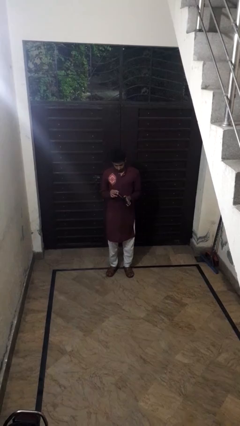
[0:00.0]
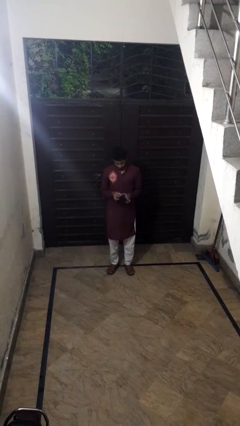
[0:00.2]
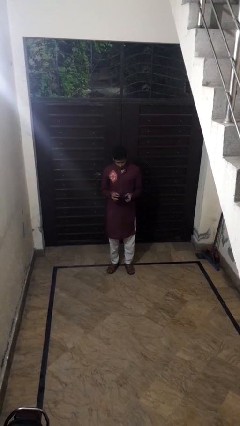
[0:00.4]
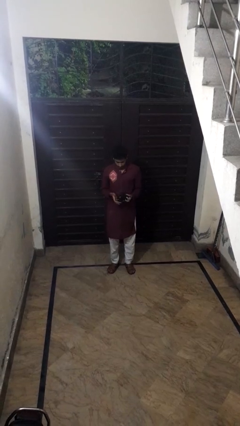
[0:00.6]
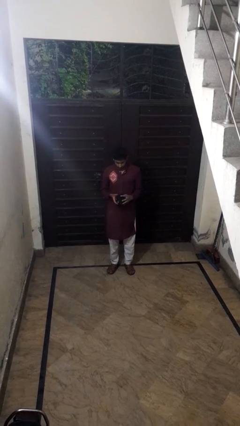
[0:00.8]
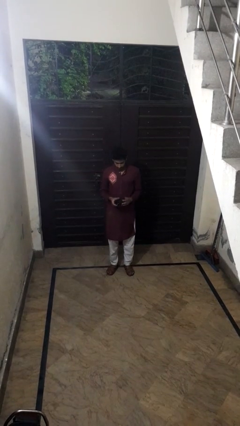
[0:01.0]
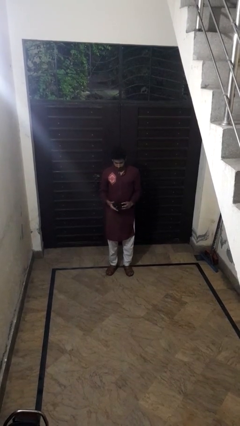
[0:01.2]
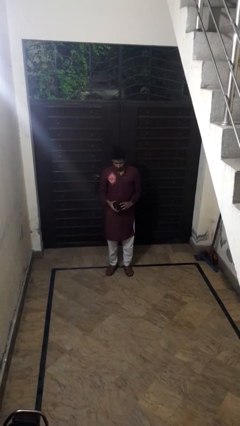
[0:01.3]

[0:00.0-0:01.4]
person puts object into purse

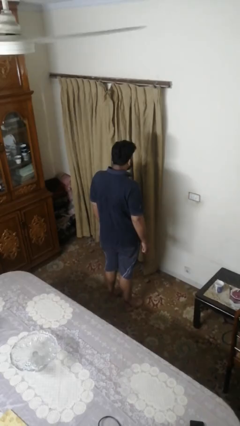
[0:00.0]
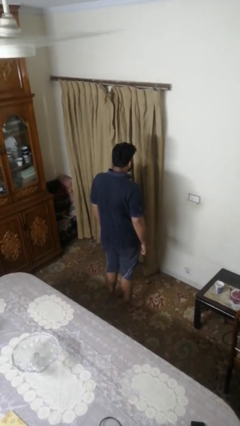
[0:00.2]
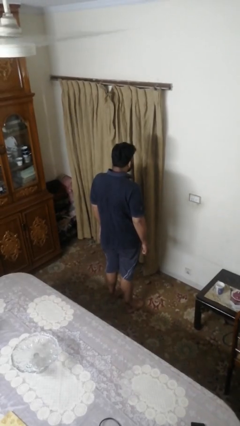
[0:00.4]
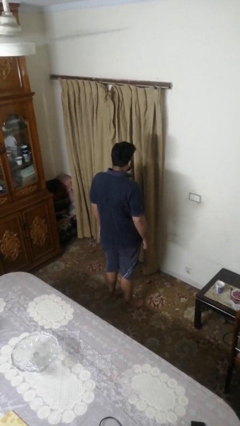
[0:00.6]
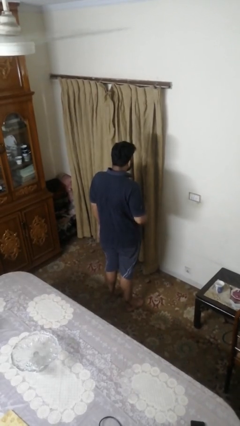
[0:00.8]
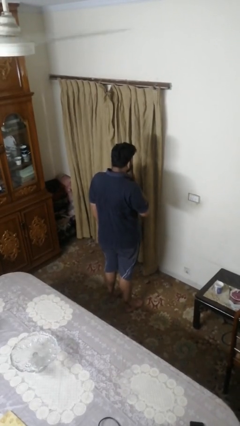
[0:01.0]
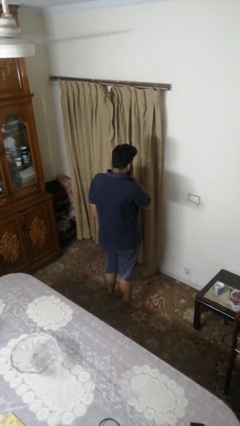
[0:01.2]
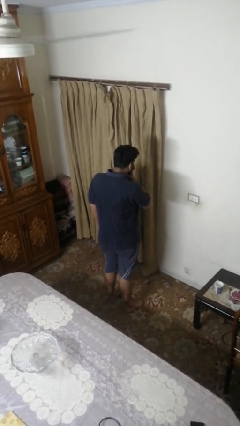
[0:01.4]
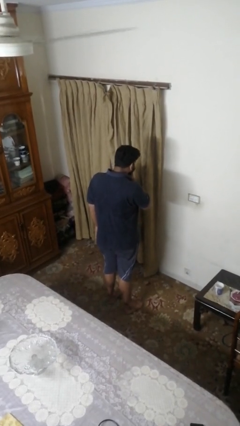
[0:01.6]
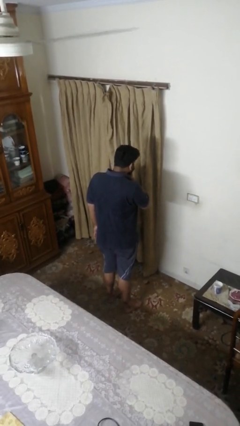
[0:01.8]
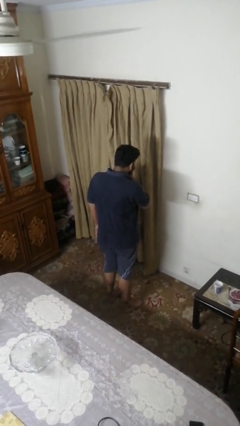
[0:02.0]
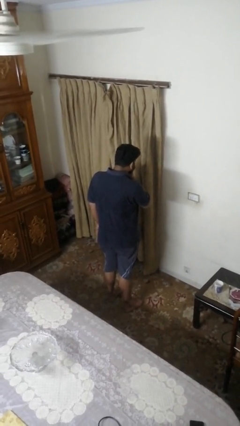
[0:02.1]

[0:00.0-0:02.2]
person strokes chin

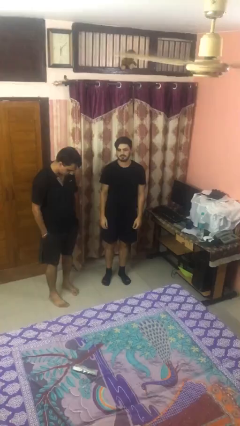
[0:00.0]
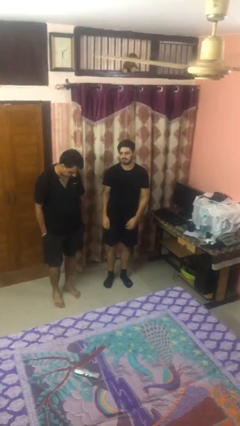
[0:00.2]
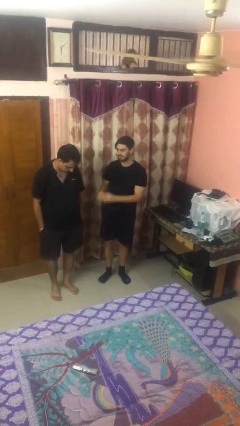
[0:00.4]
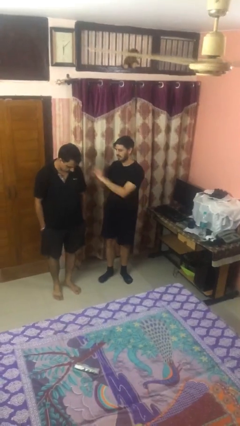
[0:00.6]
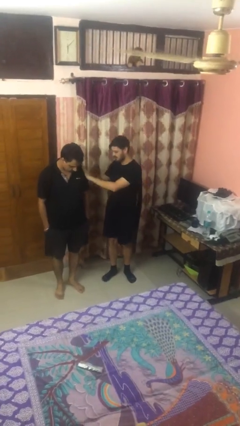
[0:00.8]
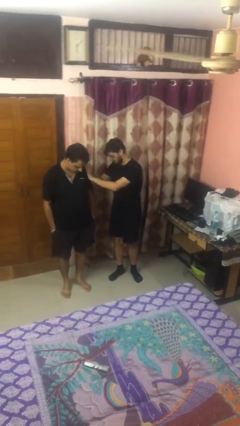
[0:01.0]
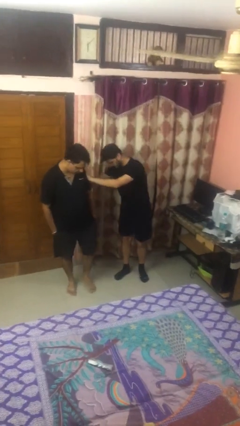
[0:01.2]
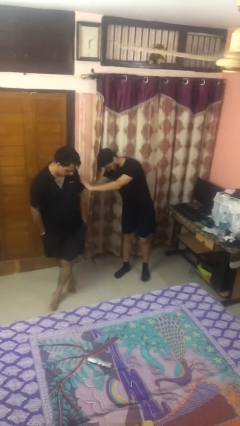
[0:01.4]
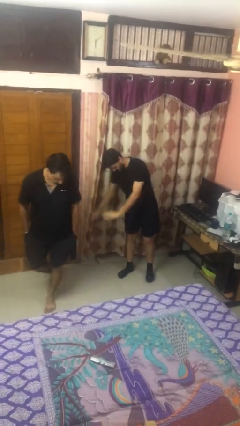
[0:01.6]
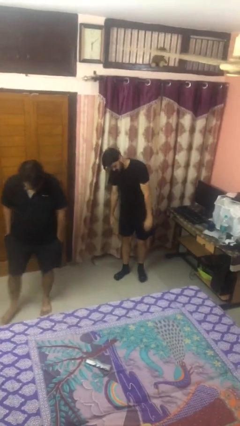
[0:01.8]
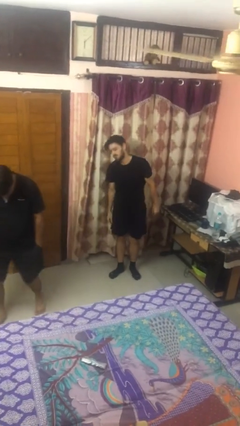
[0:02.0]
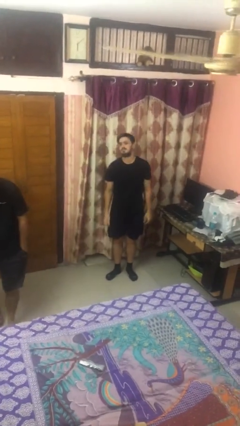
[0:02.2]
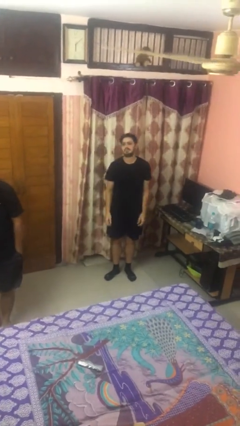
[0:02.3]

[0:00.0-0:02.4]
person shoves person

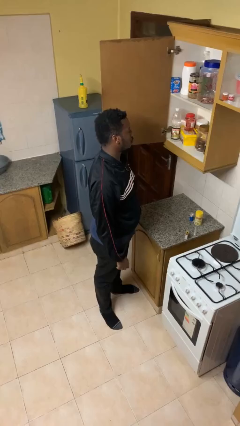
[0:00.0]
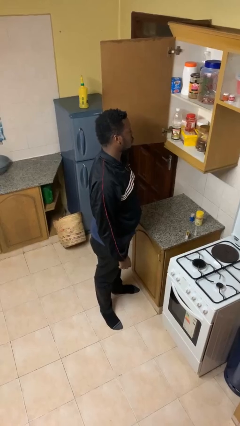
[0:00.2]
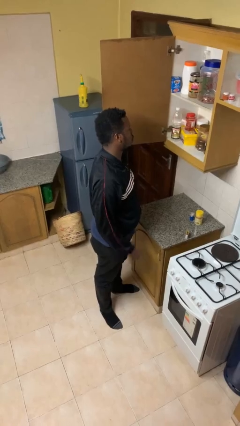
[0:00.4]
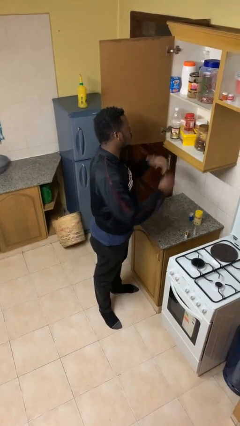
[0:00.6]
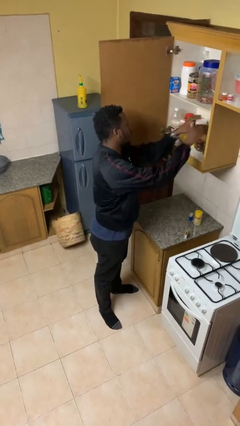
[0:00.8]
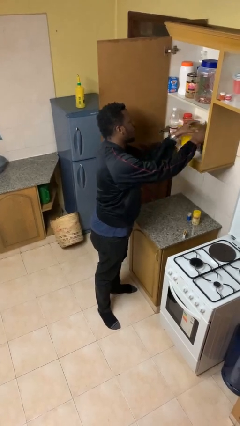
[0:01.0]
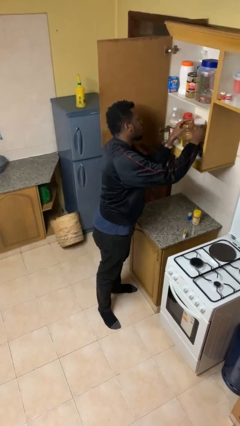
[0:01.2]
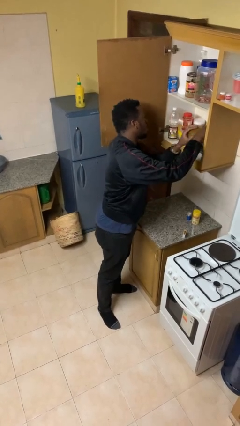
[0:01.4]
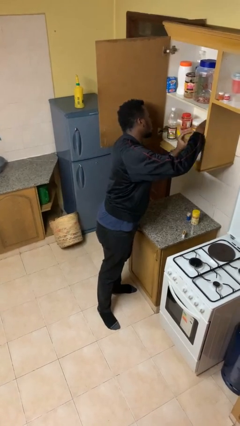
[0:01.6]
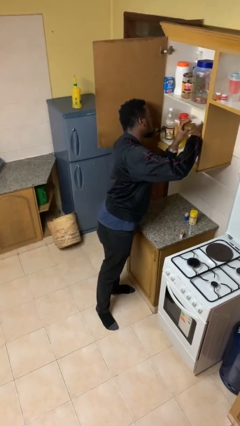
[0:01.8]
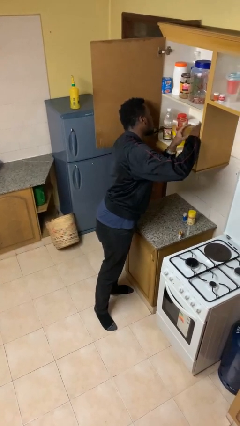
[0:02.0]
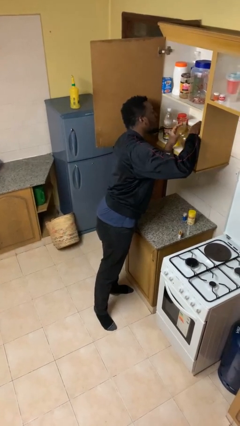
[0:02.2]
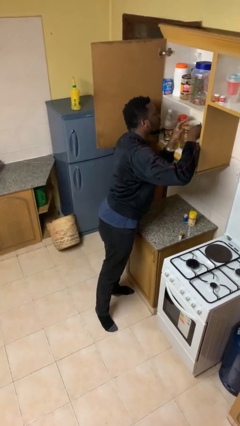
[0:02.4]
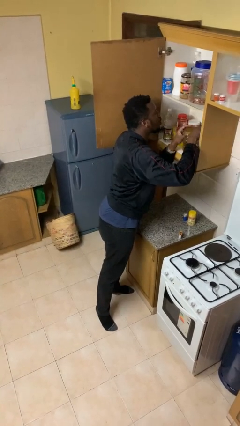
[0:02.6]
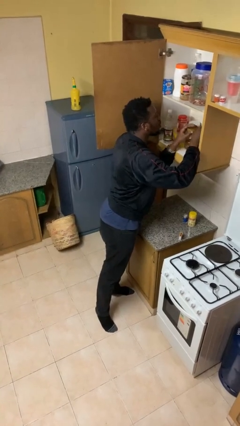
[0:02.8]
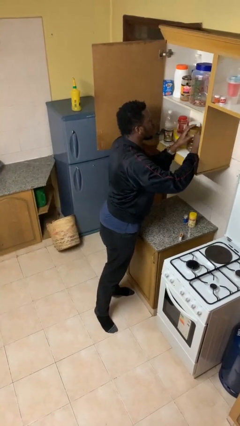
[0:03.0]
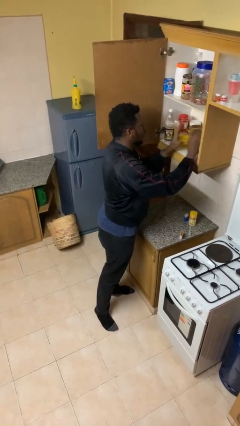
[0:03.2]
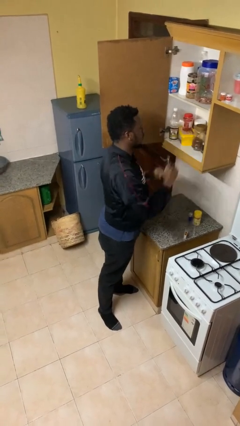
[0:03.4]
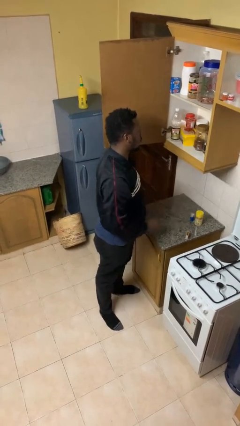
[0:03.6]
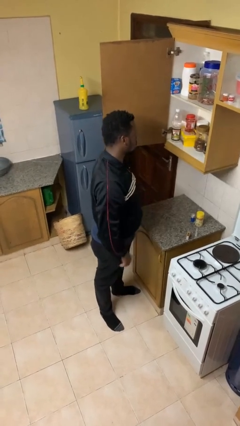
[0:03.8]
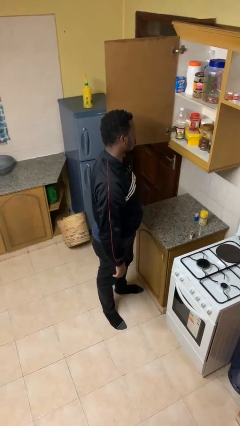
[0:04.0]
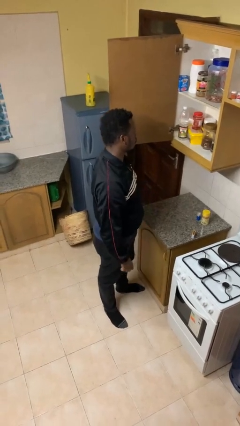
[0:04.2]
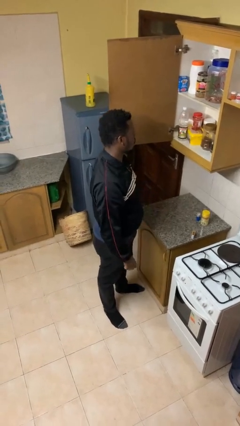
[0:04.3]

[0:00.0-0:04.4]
person searches in cabinet

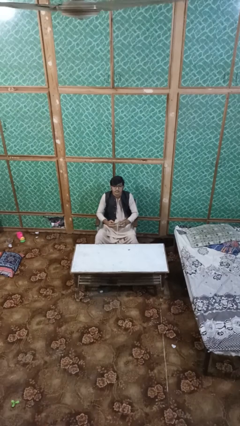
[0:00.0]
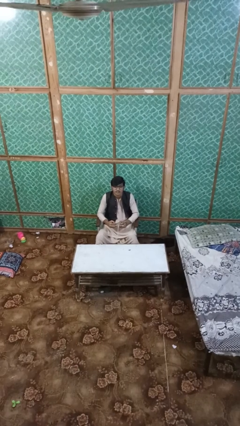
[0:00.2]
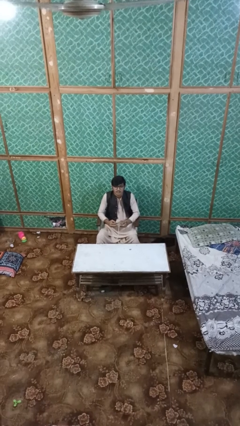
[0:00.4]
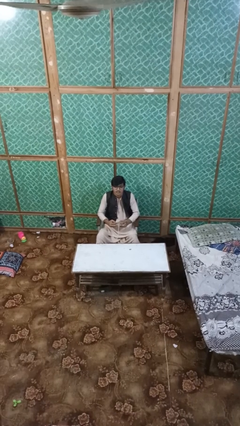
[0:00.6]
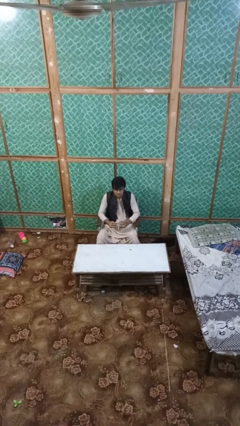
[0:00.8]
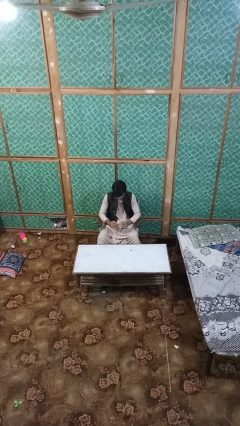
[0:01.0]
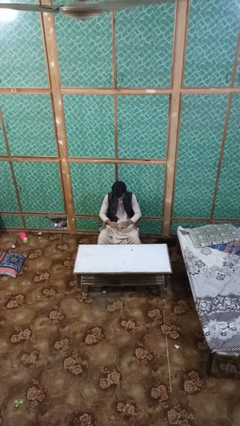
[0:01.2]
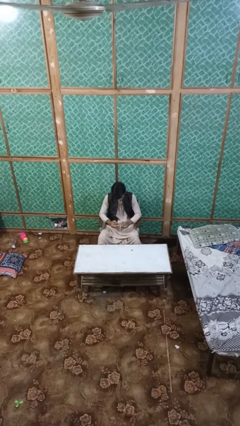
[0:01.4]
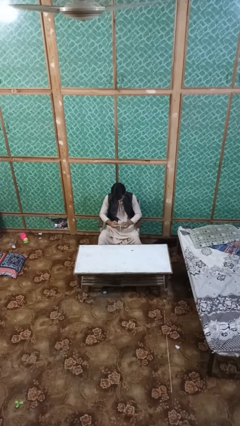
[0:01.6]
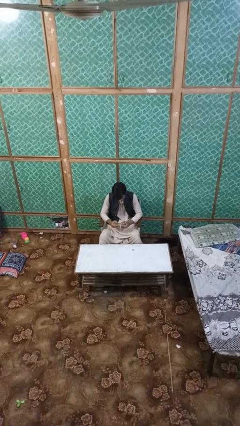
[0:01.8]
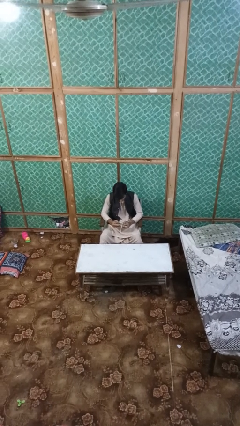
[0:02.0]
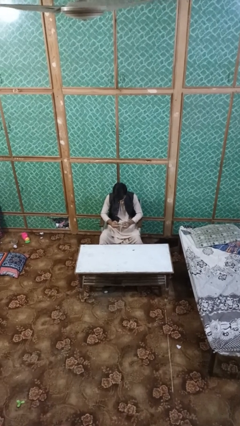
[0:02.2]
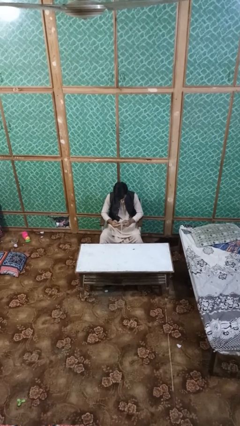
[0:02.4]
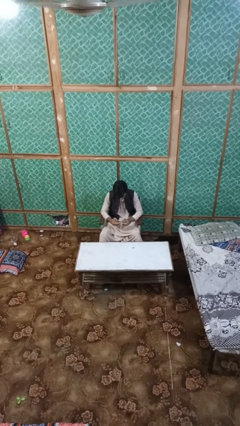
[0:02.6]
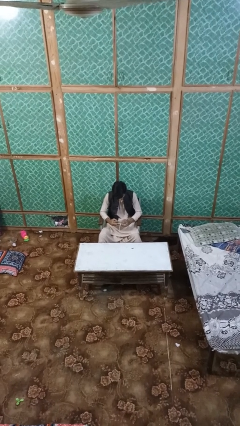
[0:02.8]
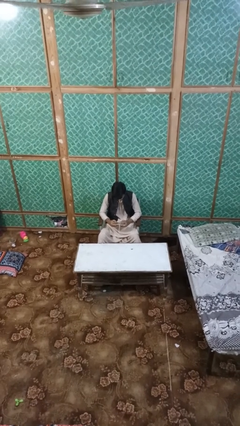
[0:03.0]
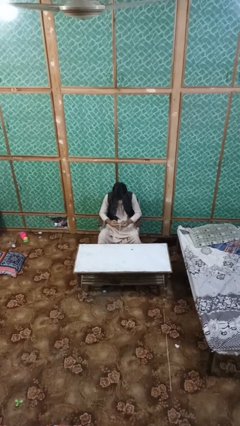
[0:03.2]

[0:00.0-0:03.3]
person interacts with handheld game

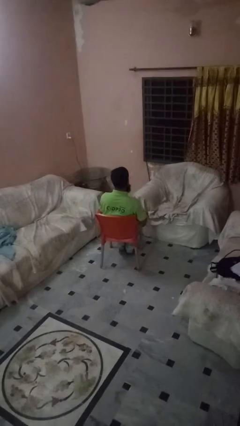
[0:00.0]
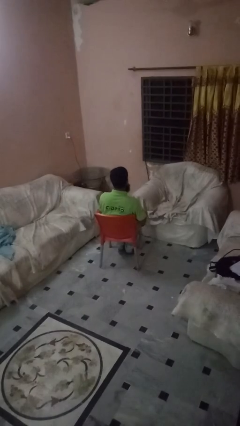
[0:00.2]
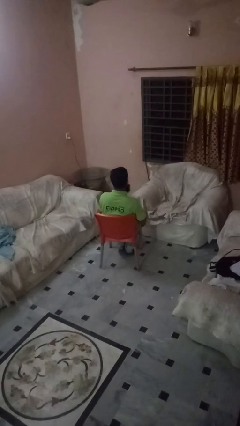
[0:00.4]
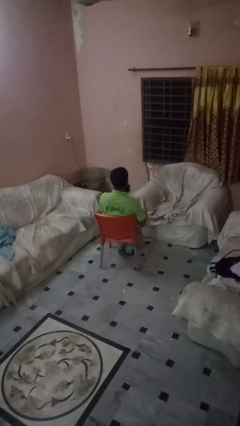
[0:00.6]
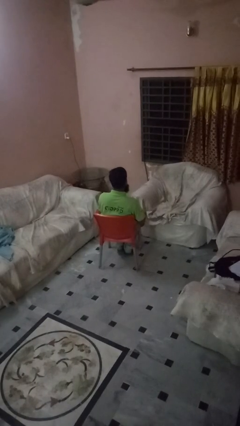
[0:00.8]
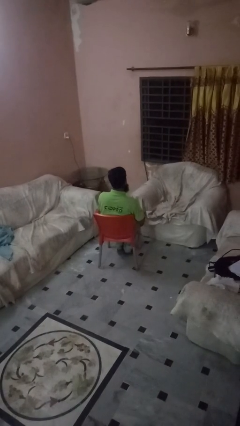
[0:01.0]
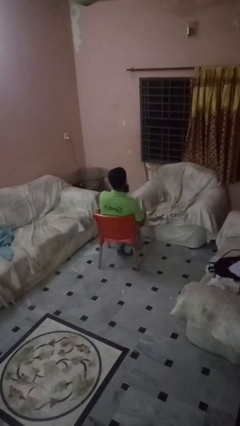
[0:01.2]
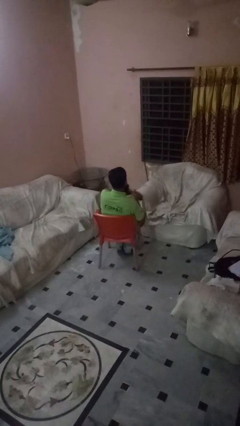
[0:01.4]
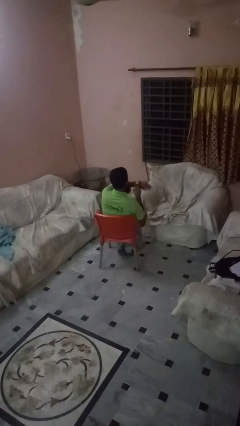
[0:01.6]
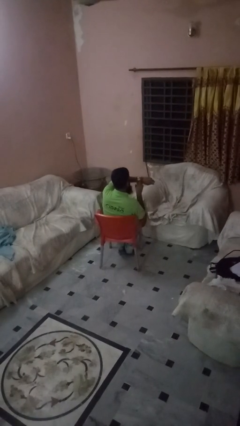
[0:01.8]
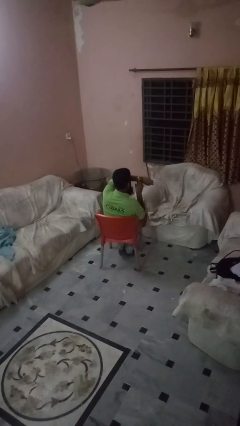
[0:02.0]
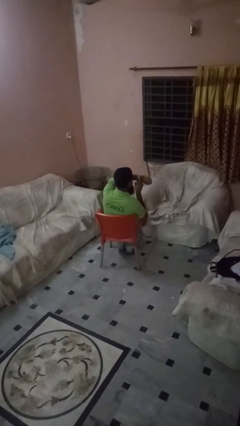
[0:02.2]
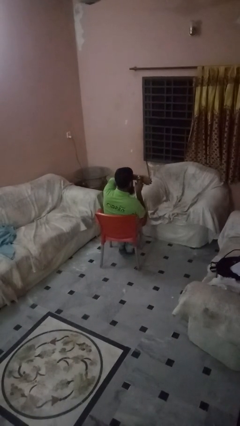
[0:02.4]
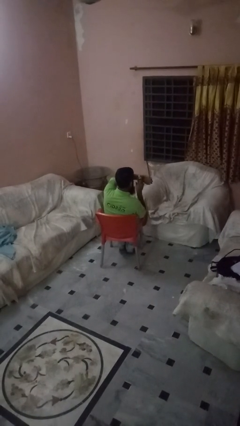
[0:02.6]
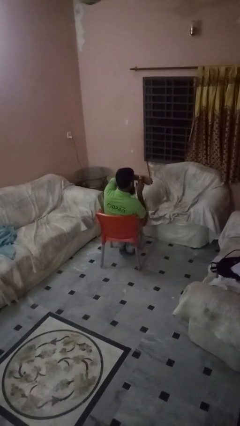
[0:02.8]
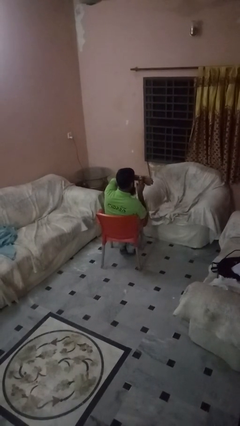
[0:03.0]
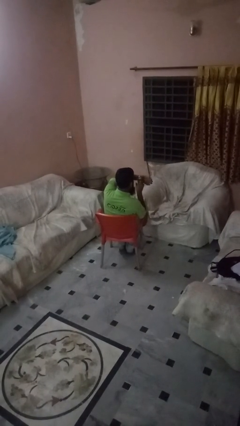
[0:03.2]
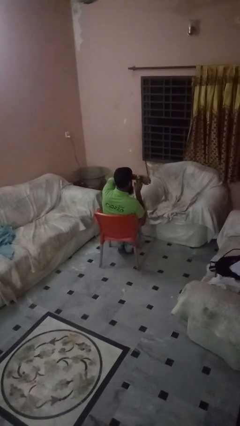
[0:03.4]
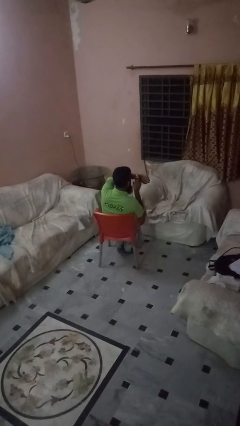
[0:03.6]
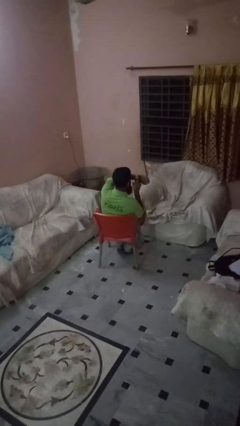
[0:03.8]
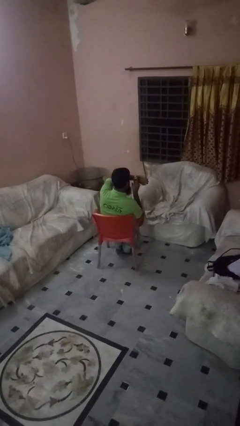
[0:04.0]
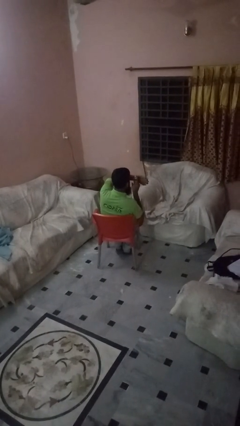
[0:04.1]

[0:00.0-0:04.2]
person gestures watch closely
